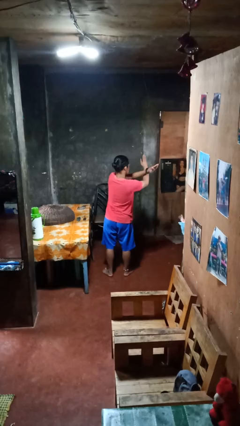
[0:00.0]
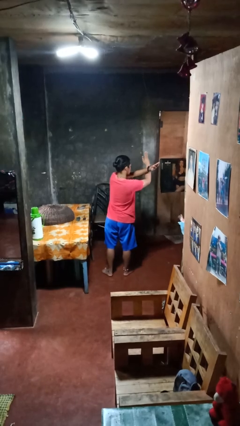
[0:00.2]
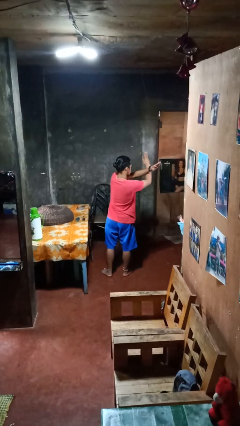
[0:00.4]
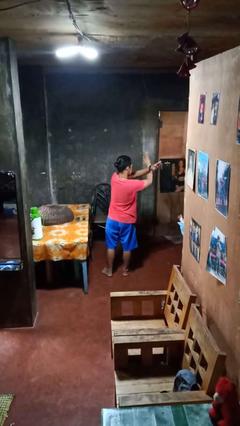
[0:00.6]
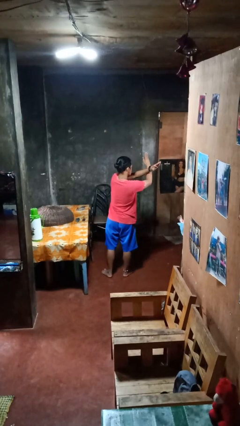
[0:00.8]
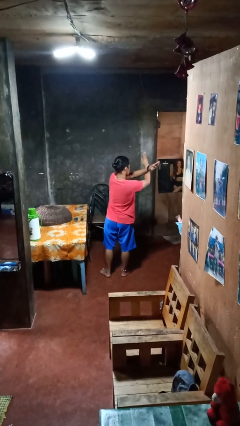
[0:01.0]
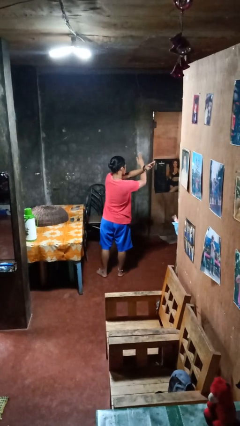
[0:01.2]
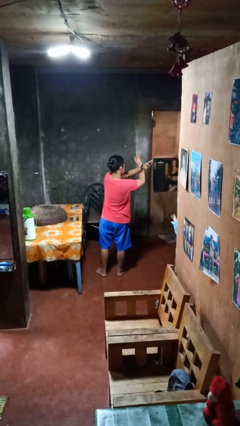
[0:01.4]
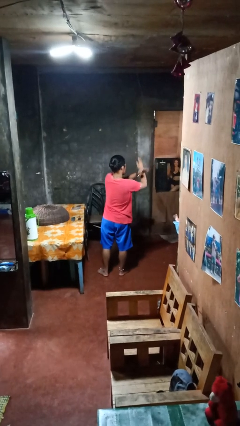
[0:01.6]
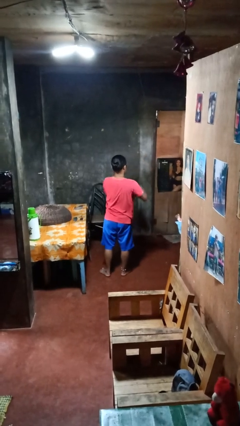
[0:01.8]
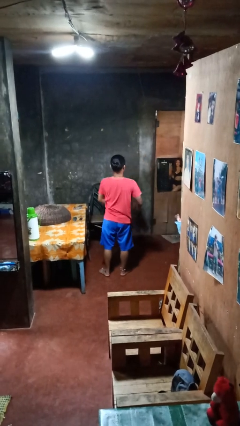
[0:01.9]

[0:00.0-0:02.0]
person gestures arms x

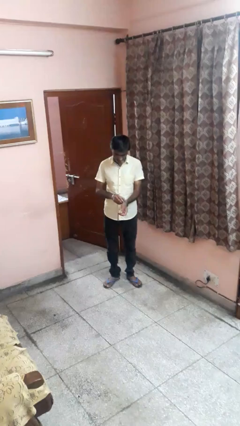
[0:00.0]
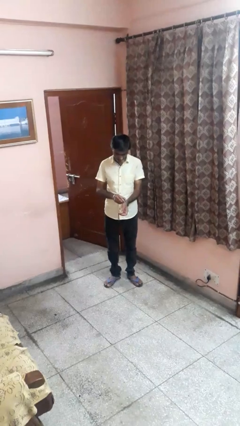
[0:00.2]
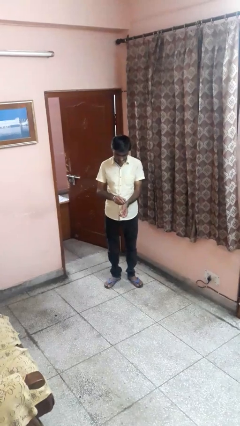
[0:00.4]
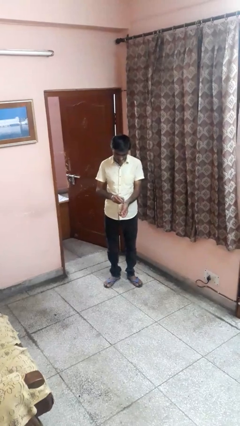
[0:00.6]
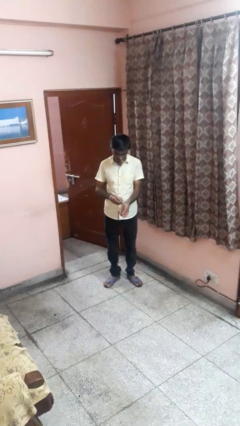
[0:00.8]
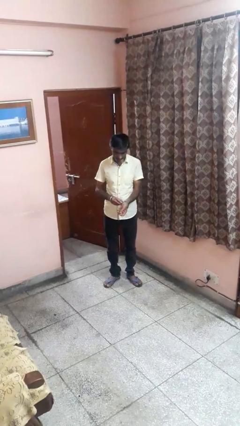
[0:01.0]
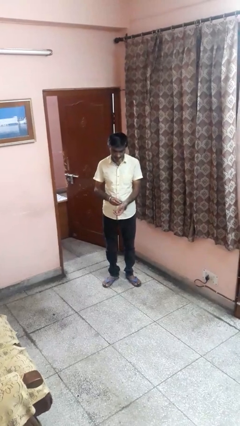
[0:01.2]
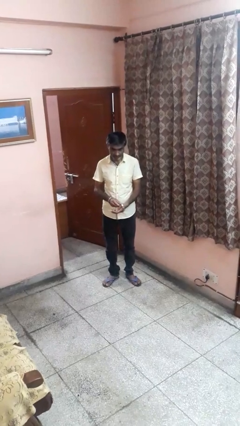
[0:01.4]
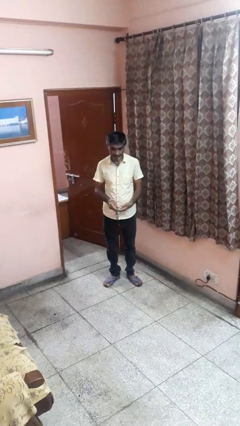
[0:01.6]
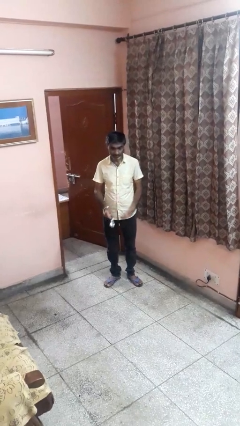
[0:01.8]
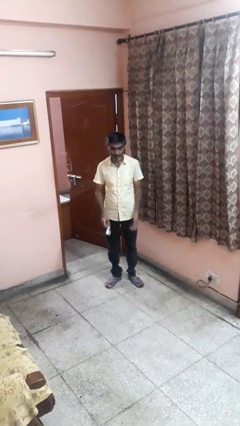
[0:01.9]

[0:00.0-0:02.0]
person takes off wristwatch

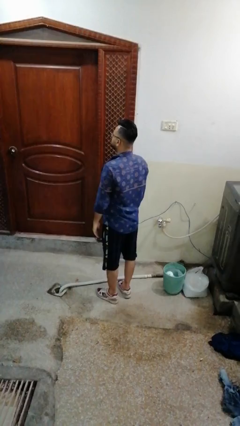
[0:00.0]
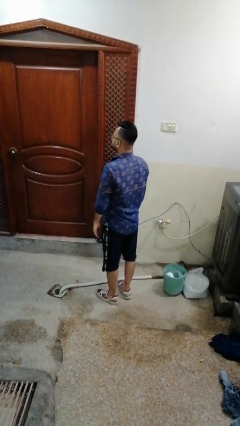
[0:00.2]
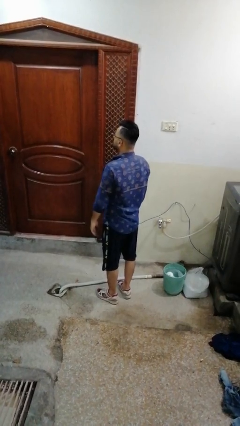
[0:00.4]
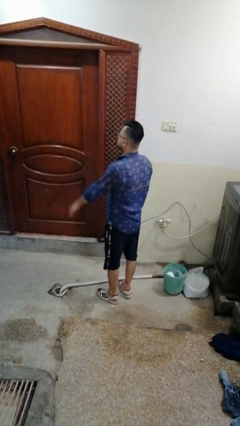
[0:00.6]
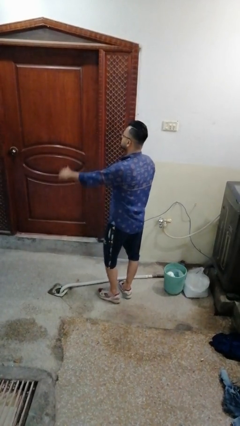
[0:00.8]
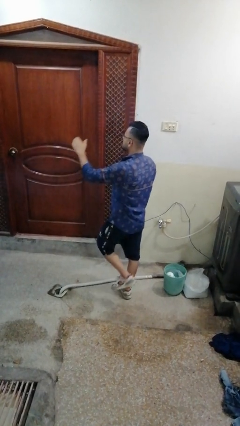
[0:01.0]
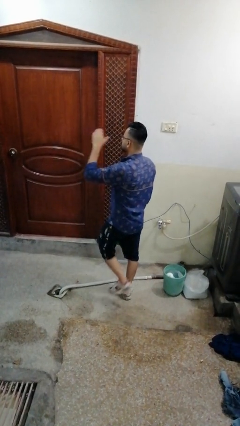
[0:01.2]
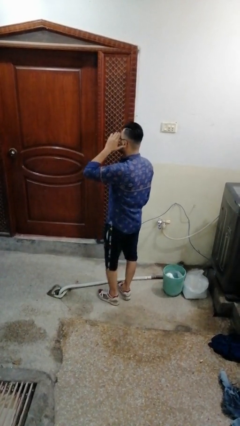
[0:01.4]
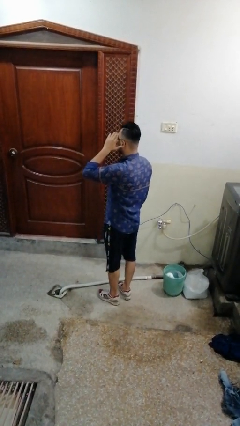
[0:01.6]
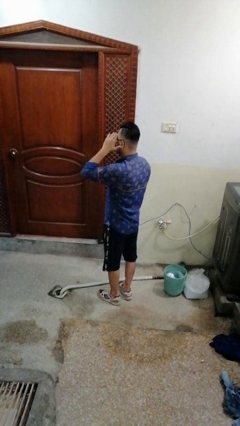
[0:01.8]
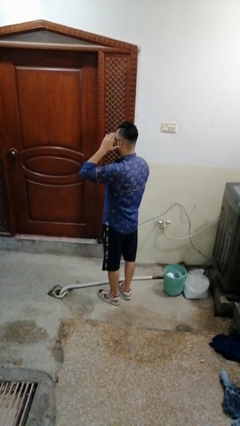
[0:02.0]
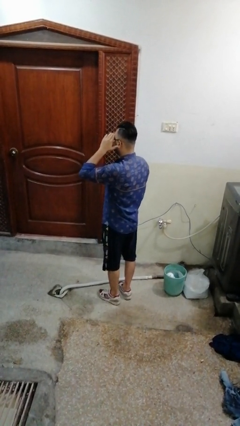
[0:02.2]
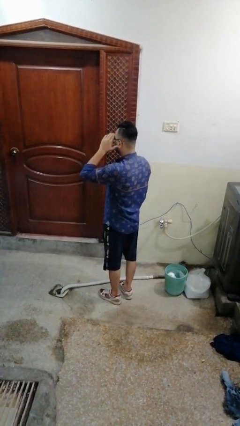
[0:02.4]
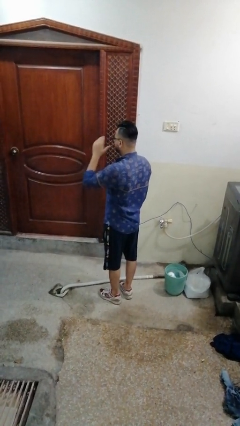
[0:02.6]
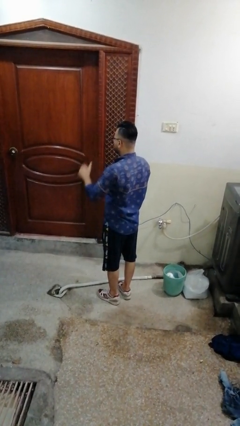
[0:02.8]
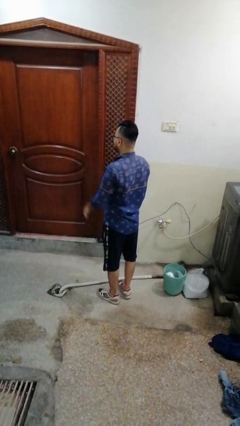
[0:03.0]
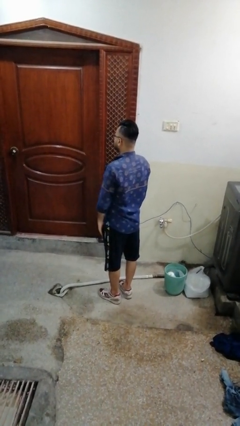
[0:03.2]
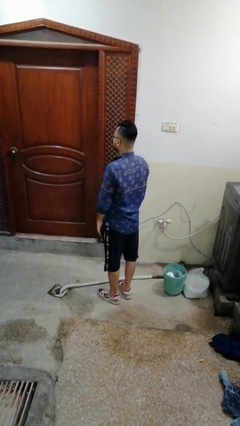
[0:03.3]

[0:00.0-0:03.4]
person salutes

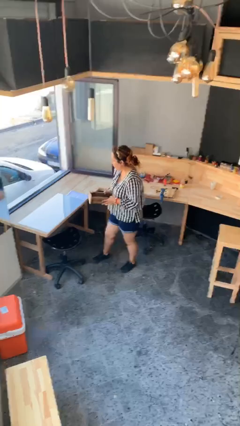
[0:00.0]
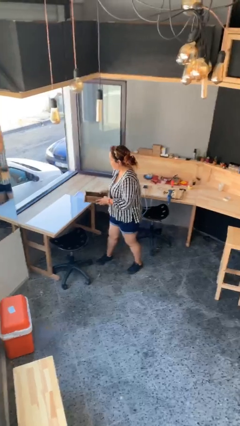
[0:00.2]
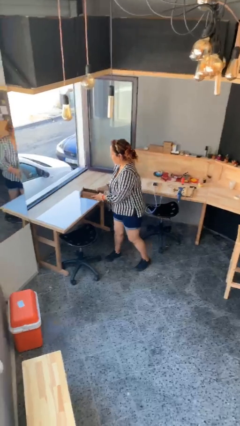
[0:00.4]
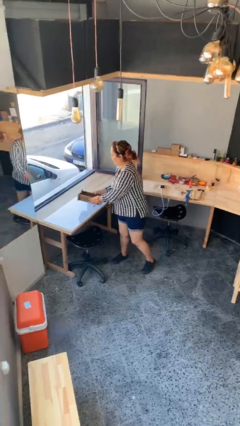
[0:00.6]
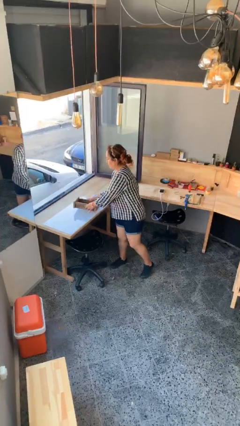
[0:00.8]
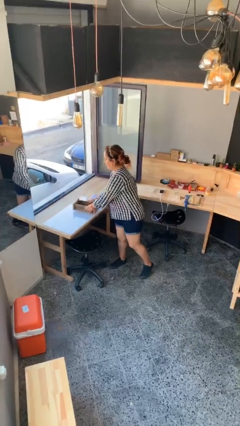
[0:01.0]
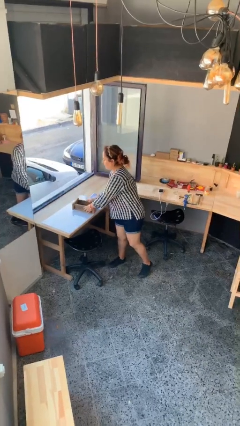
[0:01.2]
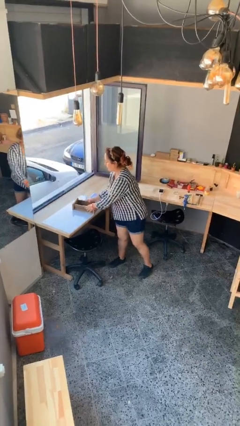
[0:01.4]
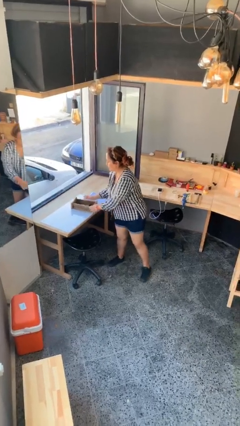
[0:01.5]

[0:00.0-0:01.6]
person puts down object on table

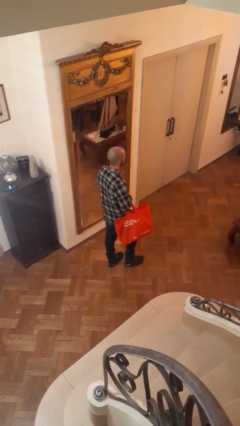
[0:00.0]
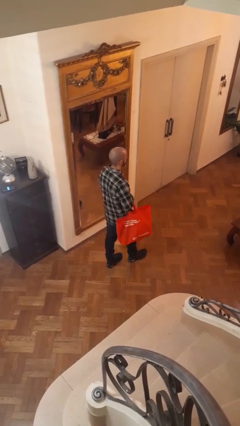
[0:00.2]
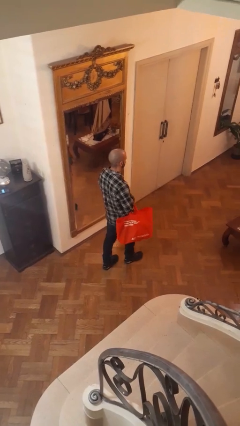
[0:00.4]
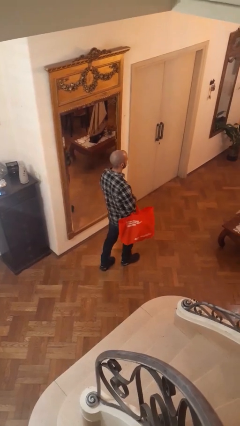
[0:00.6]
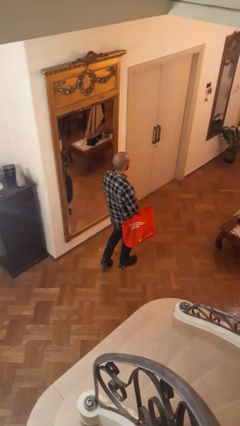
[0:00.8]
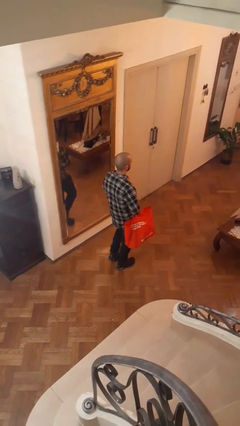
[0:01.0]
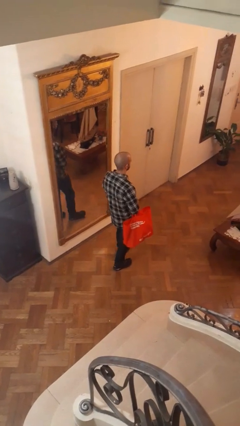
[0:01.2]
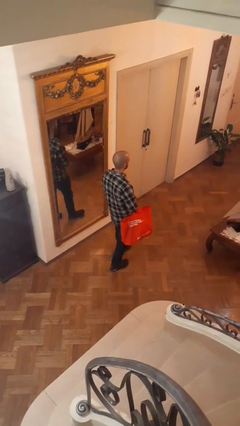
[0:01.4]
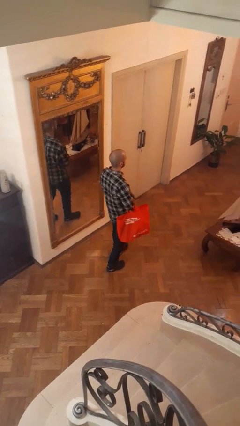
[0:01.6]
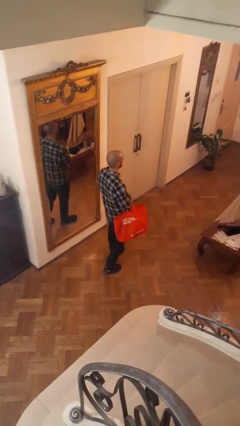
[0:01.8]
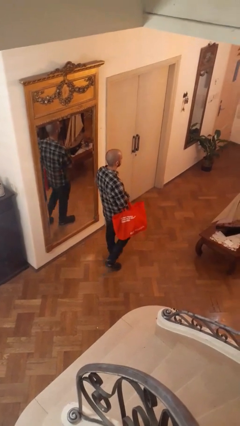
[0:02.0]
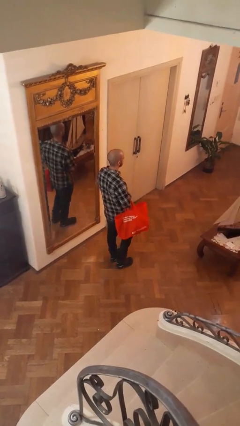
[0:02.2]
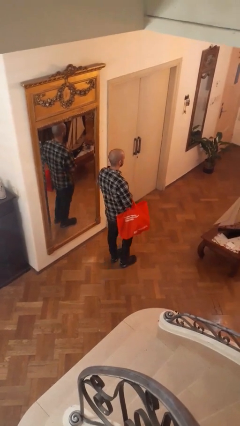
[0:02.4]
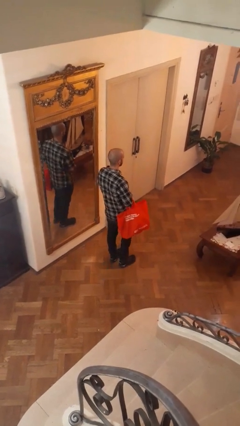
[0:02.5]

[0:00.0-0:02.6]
person carries groceries

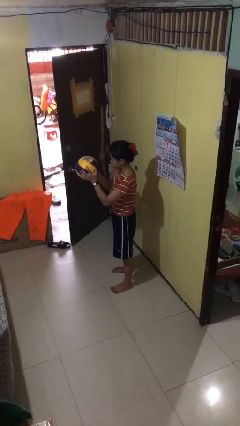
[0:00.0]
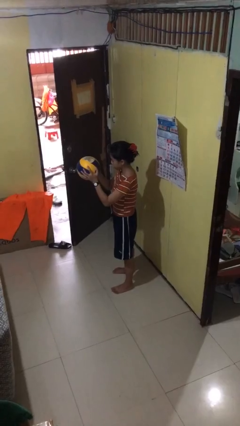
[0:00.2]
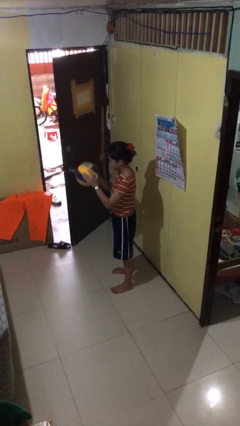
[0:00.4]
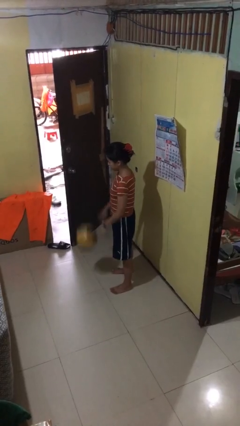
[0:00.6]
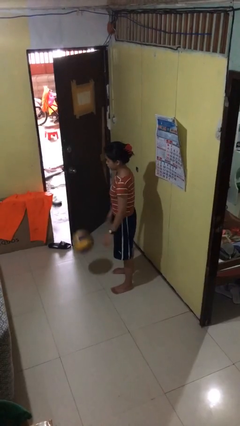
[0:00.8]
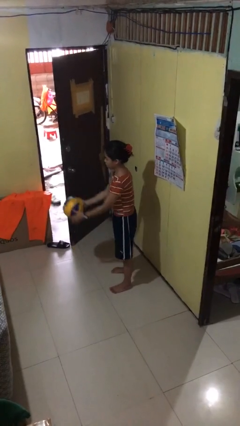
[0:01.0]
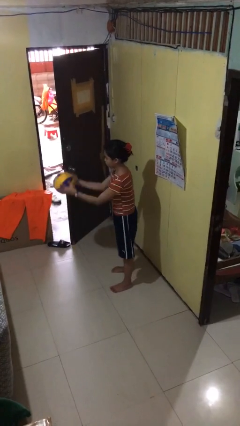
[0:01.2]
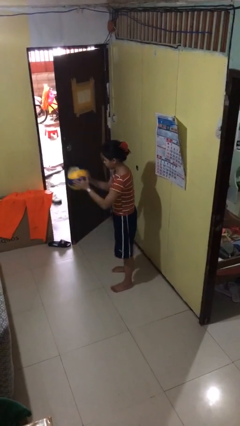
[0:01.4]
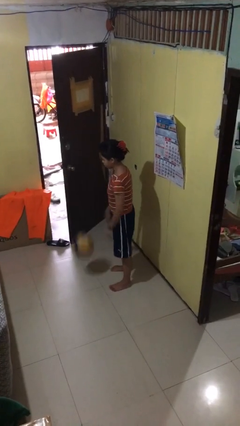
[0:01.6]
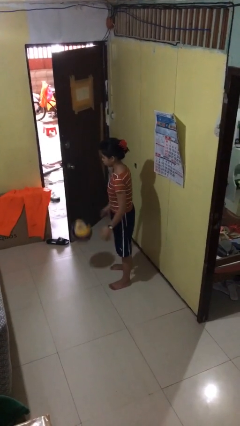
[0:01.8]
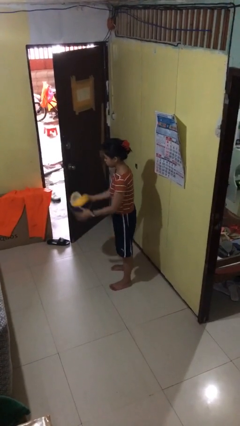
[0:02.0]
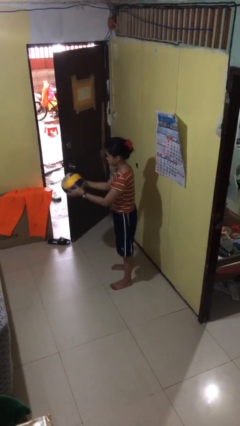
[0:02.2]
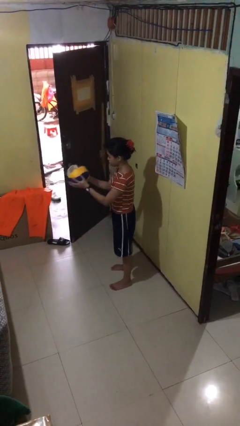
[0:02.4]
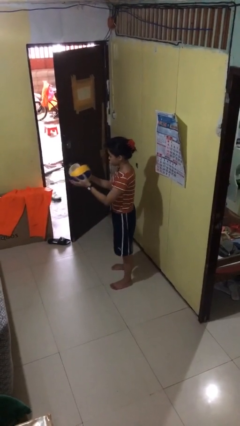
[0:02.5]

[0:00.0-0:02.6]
person bounces ball on floor

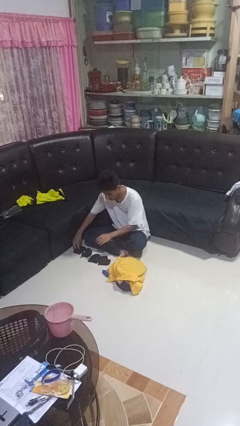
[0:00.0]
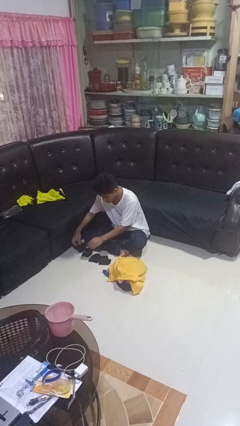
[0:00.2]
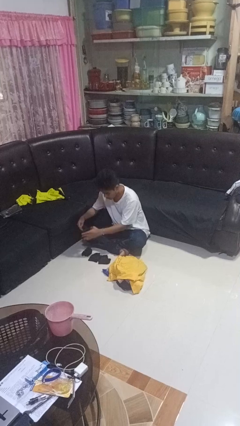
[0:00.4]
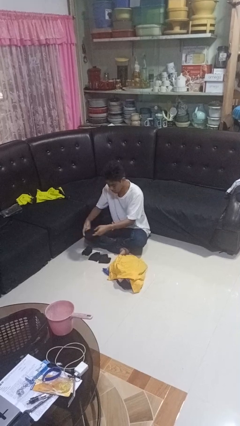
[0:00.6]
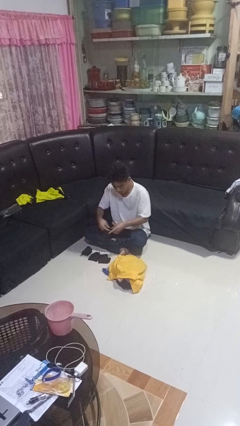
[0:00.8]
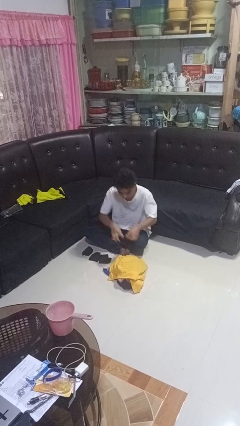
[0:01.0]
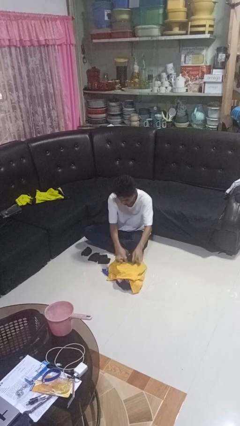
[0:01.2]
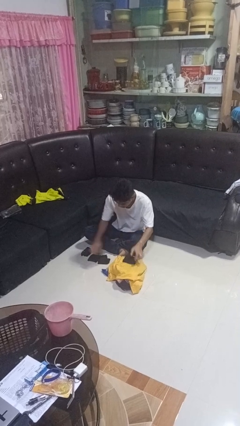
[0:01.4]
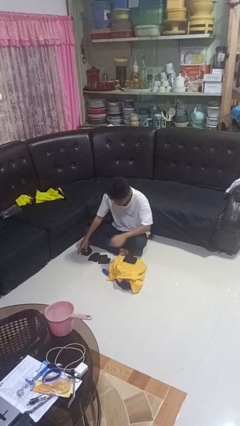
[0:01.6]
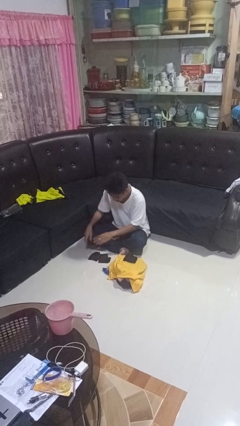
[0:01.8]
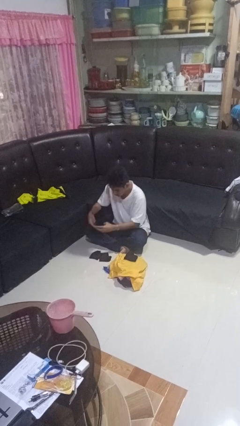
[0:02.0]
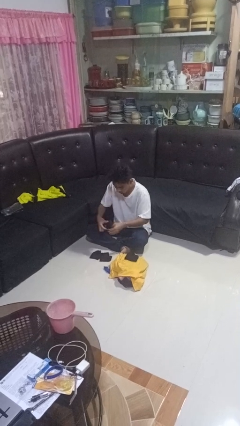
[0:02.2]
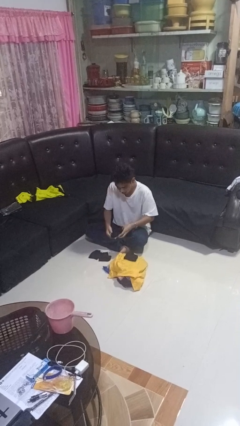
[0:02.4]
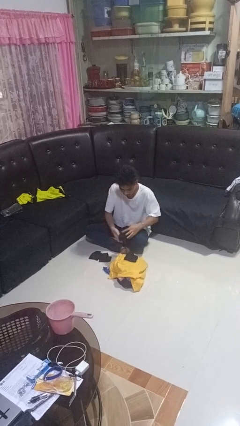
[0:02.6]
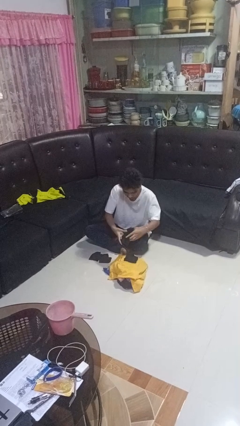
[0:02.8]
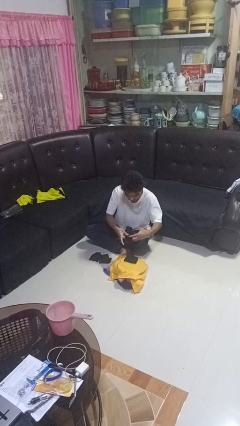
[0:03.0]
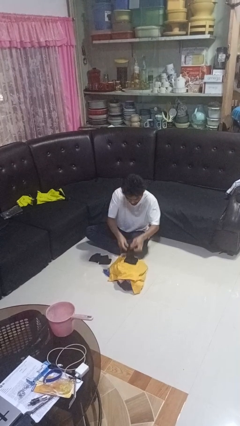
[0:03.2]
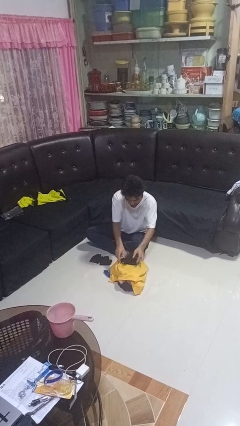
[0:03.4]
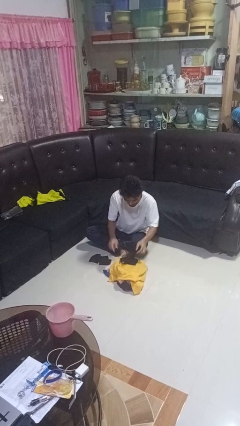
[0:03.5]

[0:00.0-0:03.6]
person folds socks
